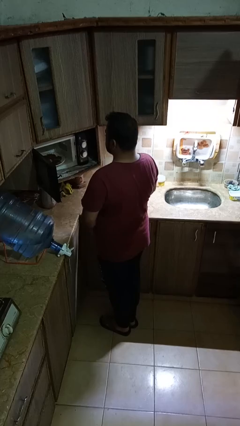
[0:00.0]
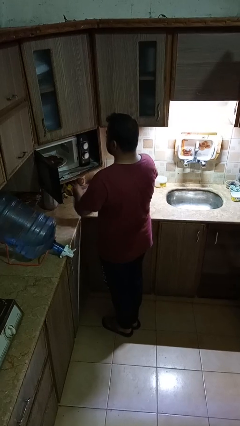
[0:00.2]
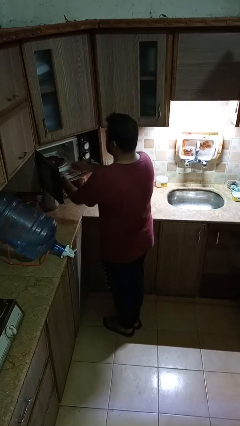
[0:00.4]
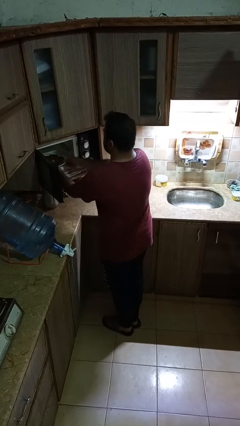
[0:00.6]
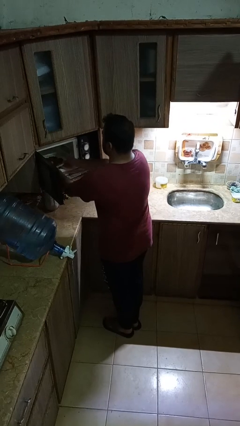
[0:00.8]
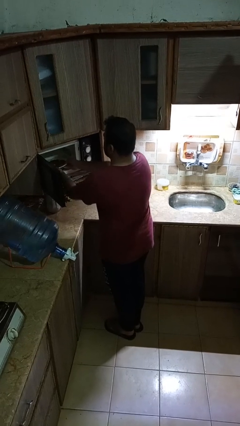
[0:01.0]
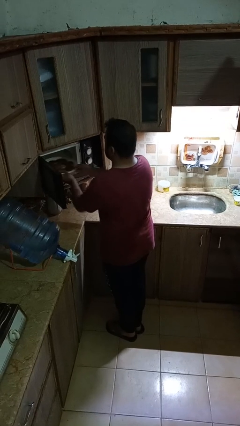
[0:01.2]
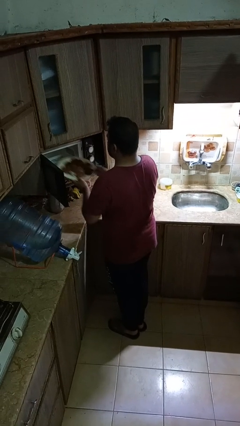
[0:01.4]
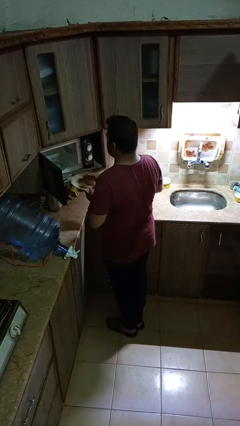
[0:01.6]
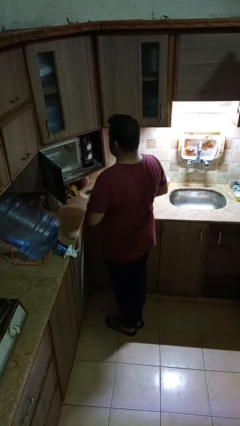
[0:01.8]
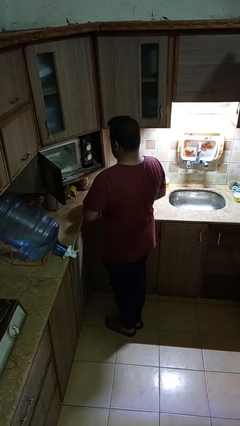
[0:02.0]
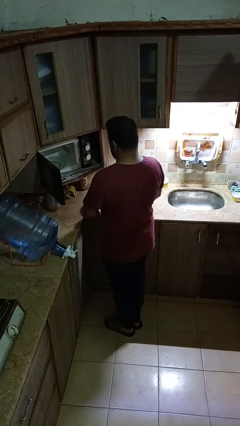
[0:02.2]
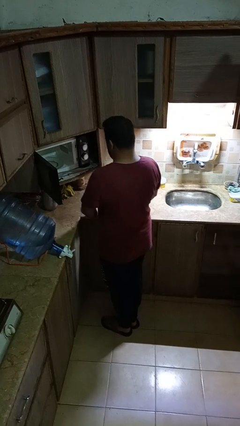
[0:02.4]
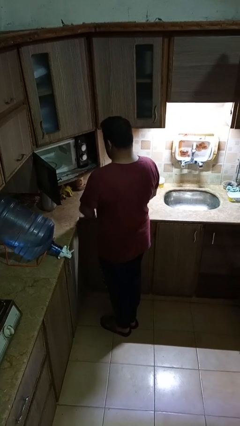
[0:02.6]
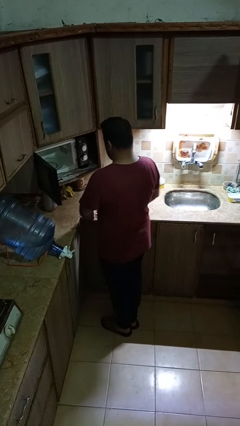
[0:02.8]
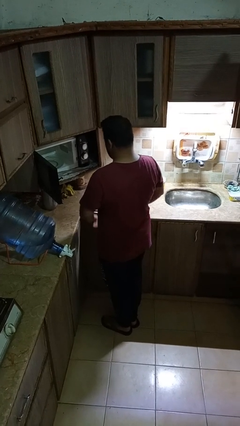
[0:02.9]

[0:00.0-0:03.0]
person takes object from microwave

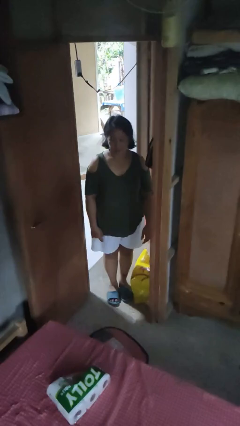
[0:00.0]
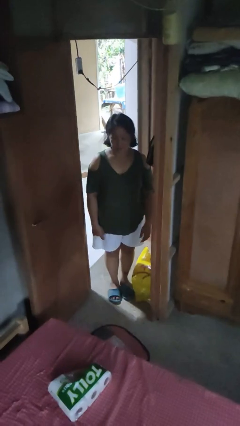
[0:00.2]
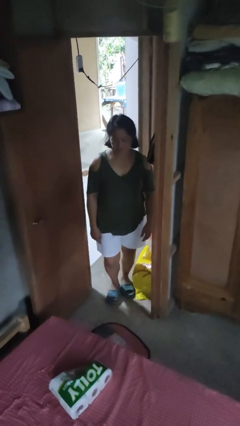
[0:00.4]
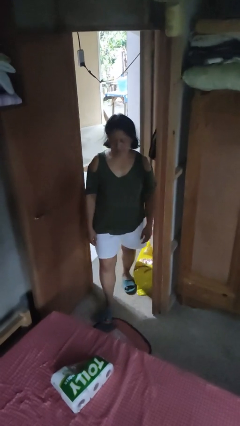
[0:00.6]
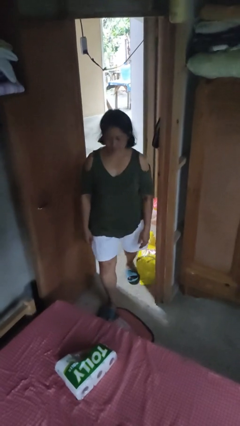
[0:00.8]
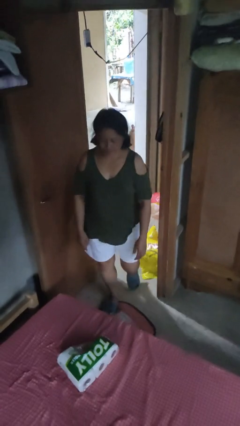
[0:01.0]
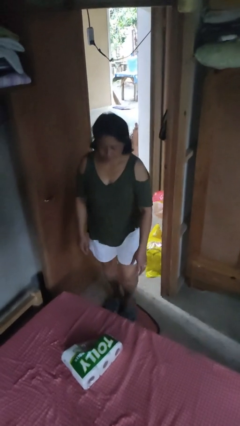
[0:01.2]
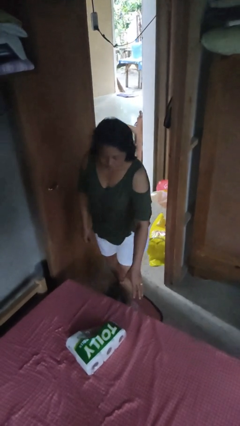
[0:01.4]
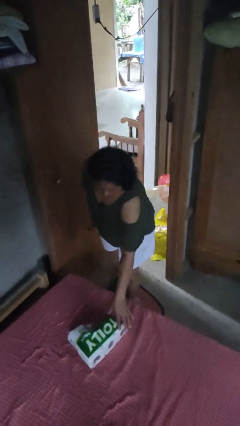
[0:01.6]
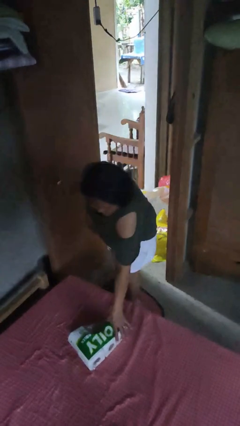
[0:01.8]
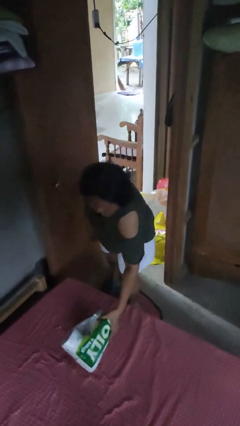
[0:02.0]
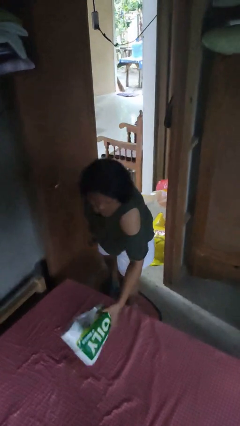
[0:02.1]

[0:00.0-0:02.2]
person picks up object from bed

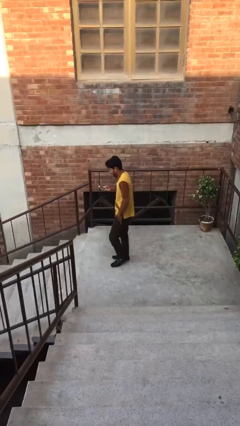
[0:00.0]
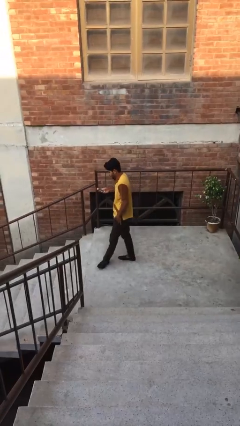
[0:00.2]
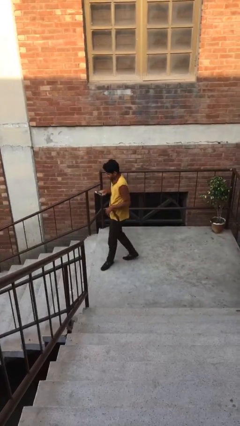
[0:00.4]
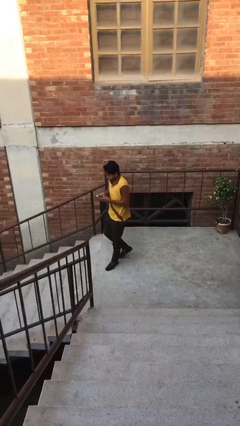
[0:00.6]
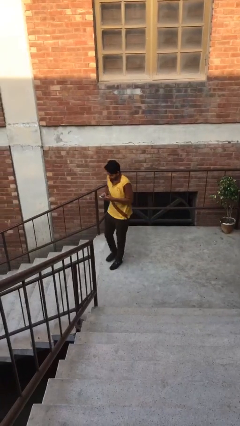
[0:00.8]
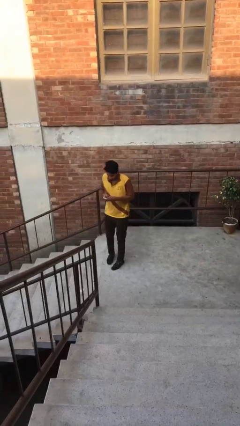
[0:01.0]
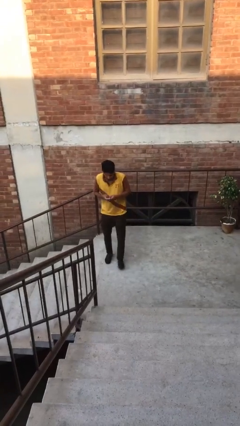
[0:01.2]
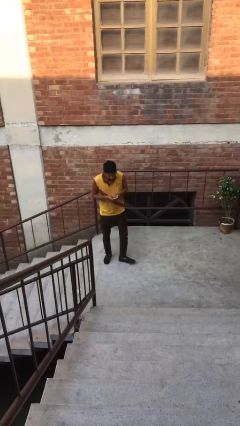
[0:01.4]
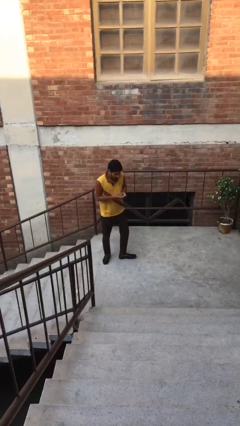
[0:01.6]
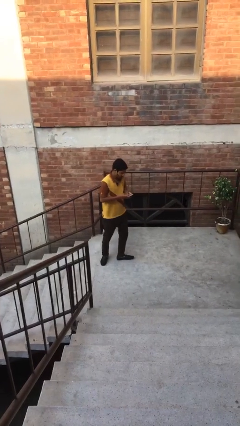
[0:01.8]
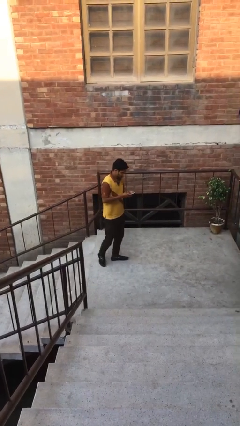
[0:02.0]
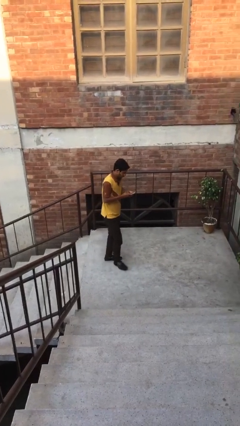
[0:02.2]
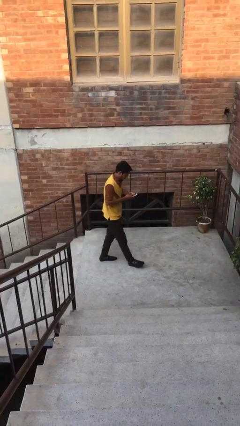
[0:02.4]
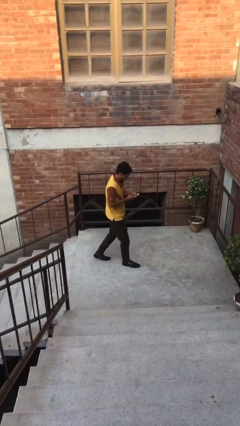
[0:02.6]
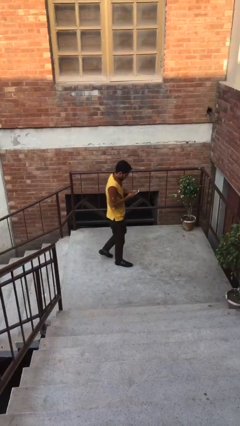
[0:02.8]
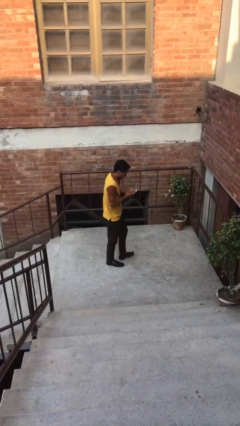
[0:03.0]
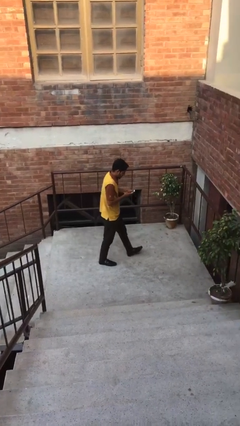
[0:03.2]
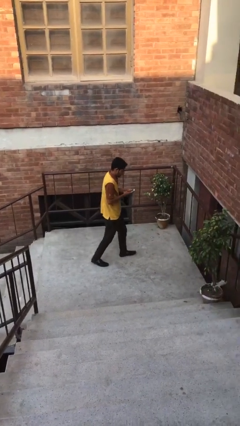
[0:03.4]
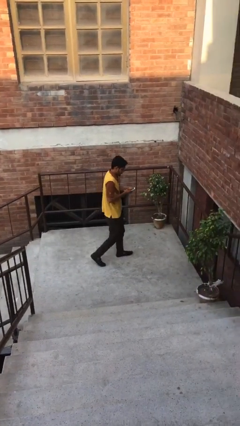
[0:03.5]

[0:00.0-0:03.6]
person texts on phone

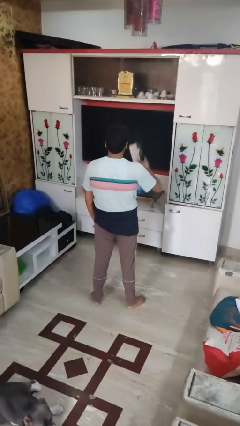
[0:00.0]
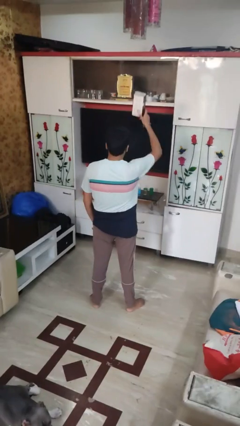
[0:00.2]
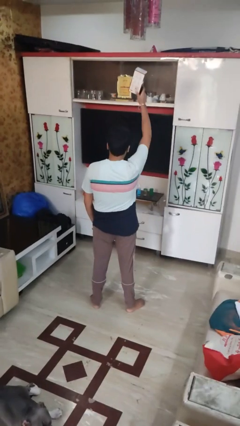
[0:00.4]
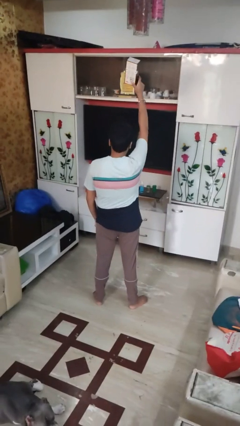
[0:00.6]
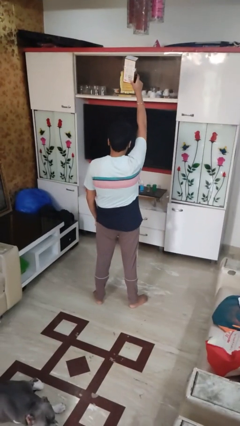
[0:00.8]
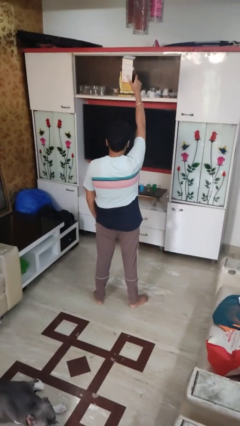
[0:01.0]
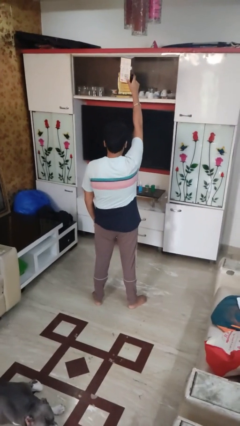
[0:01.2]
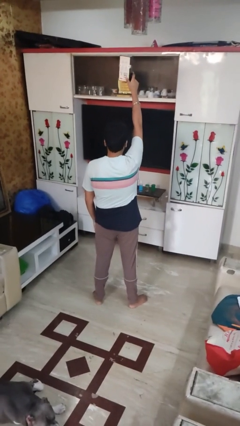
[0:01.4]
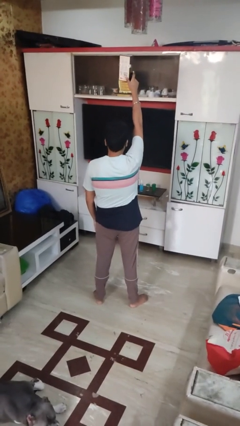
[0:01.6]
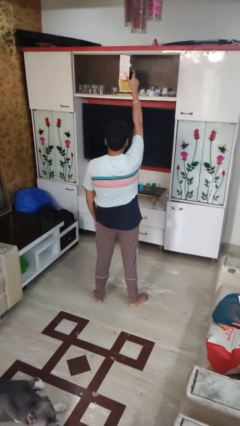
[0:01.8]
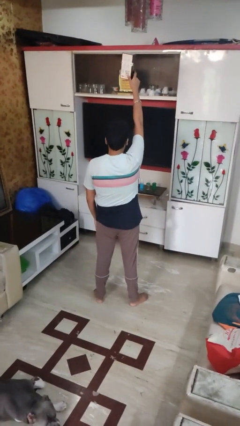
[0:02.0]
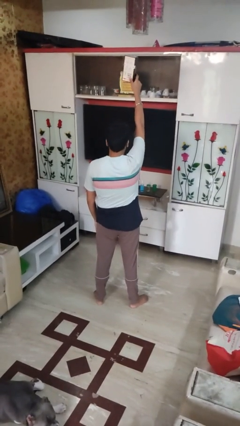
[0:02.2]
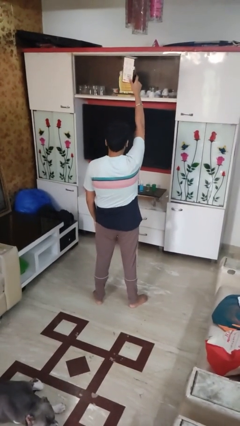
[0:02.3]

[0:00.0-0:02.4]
person holds object above head

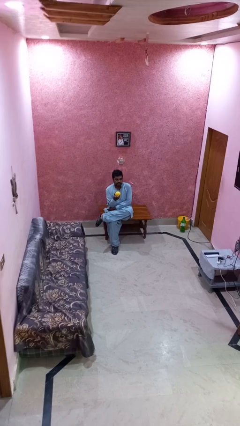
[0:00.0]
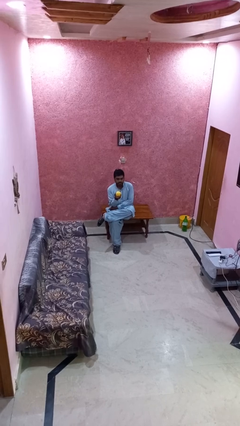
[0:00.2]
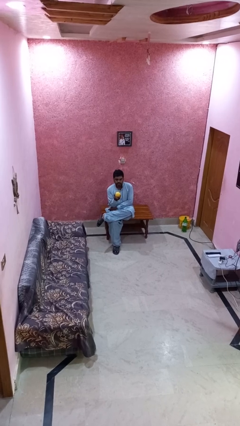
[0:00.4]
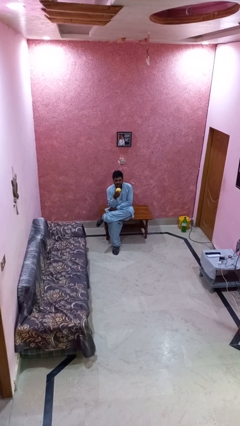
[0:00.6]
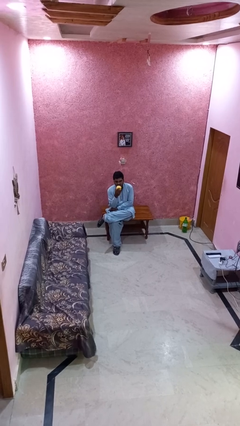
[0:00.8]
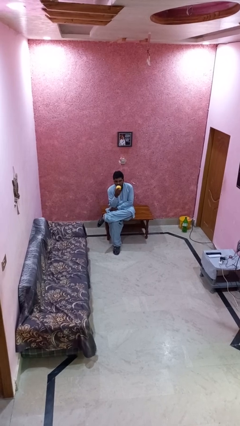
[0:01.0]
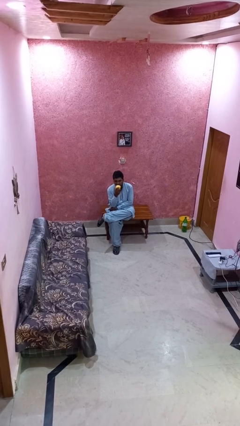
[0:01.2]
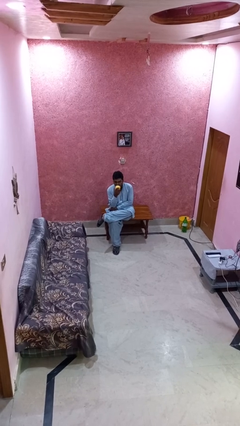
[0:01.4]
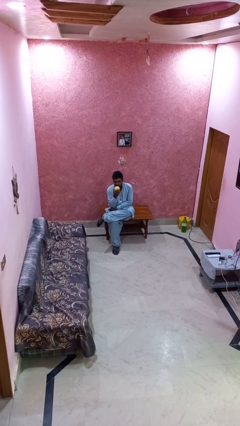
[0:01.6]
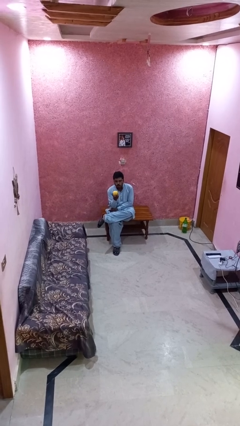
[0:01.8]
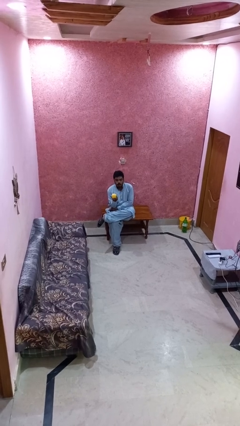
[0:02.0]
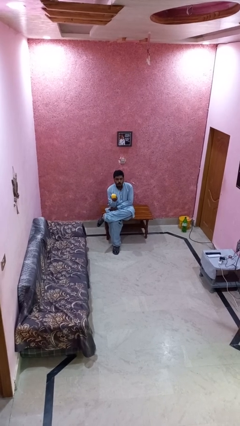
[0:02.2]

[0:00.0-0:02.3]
person eats apple

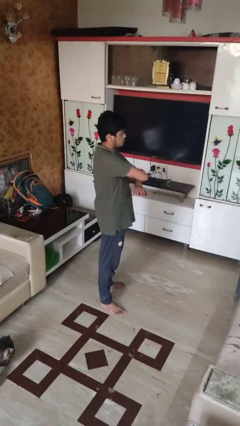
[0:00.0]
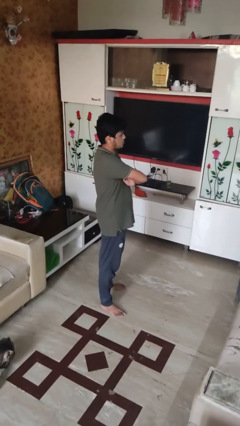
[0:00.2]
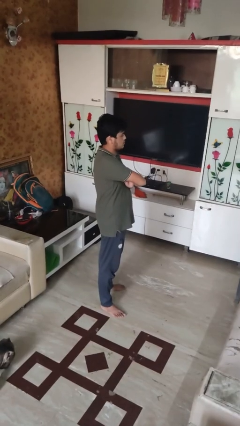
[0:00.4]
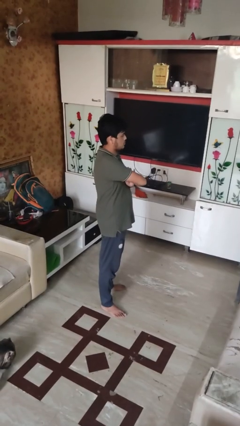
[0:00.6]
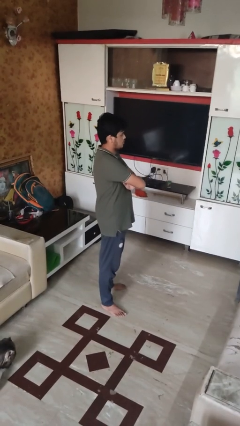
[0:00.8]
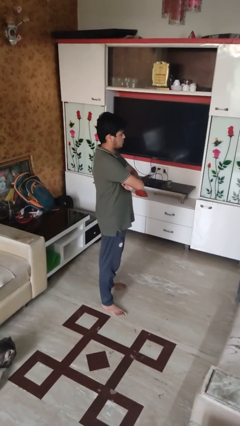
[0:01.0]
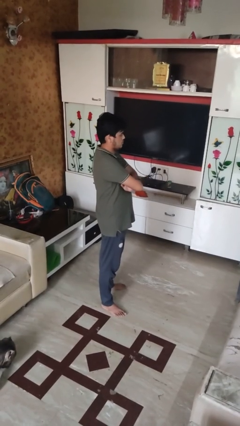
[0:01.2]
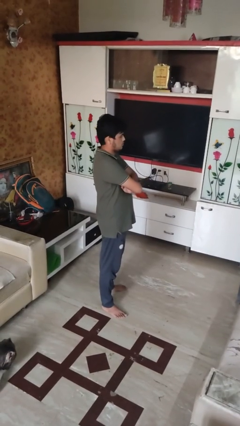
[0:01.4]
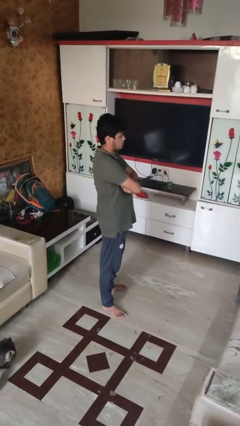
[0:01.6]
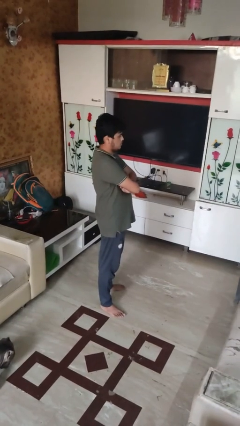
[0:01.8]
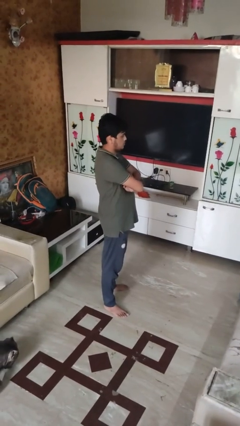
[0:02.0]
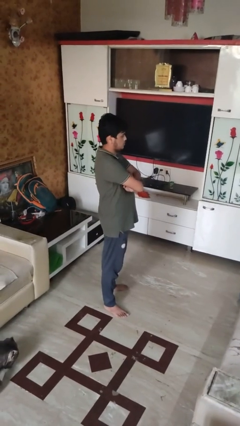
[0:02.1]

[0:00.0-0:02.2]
person crosses arms

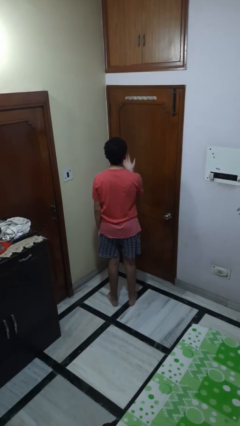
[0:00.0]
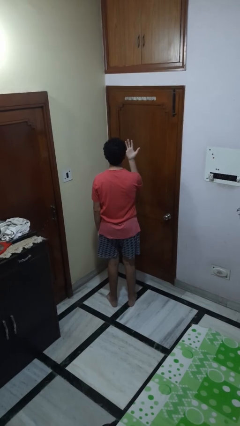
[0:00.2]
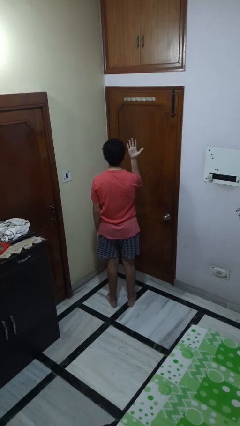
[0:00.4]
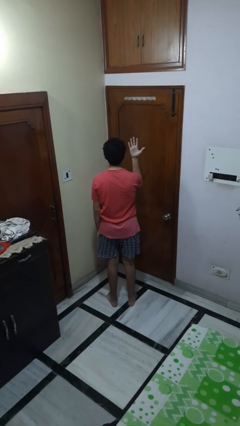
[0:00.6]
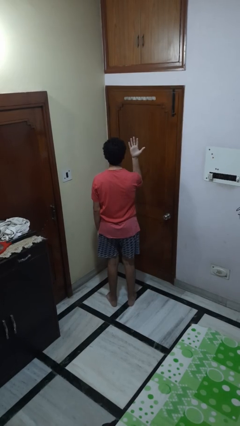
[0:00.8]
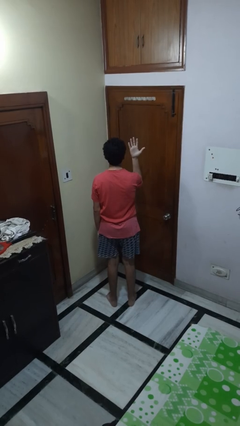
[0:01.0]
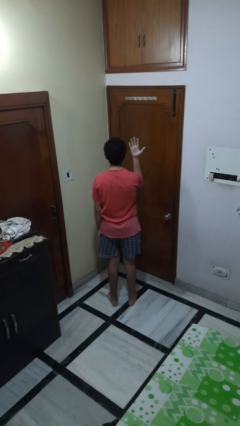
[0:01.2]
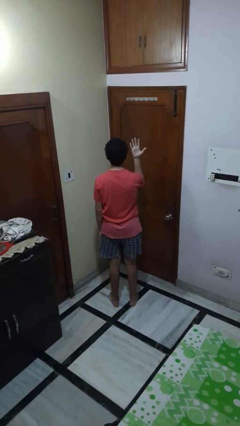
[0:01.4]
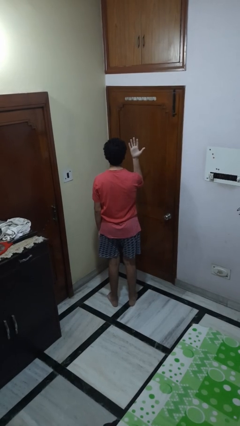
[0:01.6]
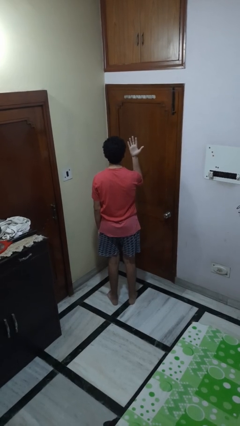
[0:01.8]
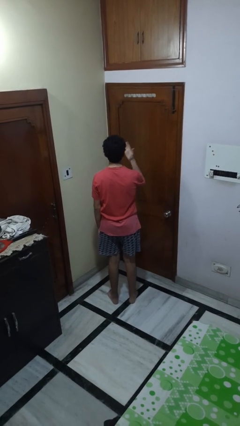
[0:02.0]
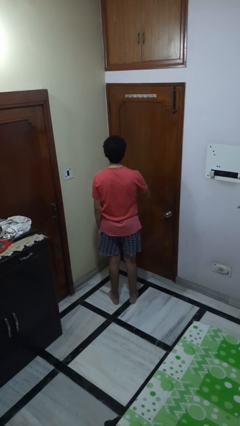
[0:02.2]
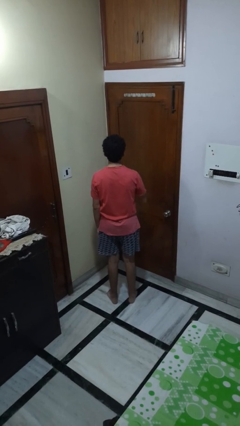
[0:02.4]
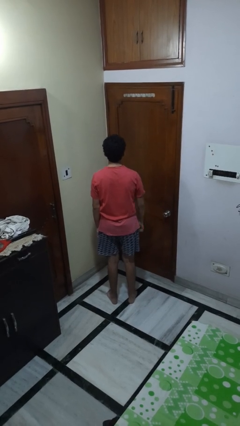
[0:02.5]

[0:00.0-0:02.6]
person gestures number five
